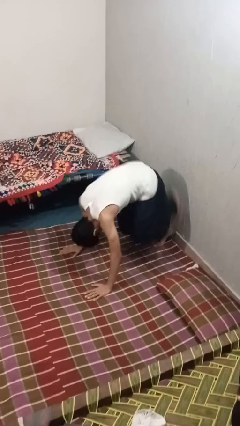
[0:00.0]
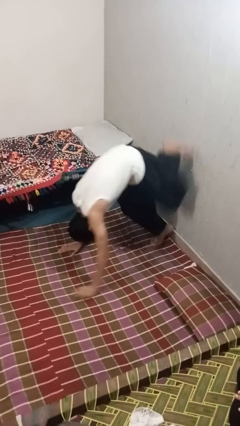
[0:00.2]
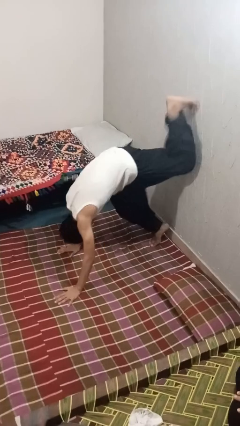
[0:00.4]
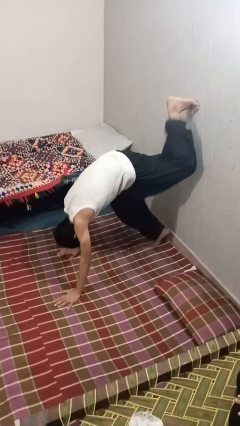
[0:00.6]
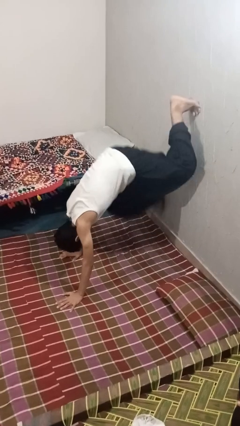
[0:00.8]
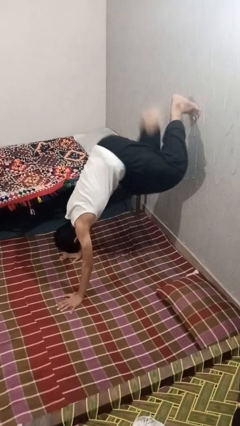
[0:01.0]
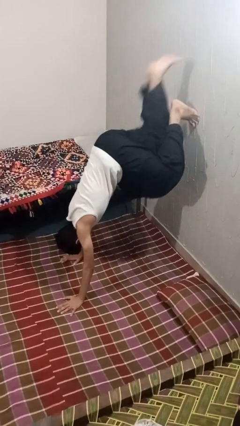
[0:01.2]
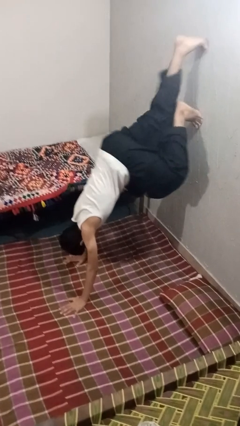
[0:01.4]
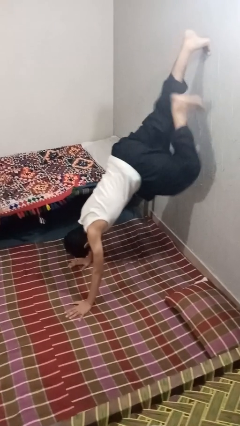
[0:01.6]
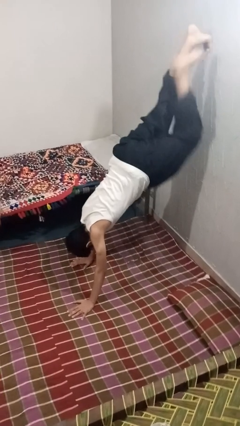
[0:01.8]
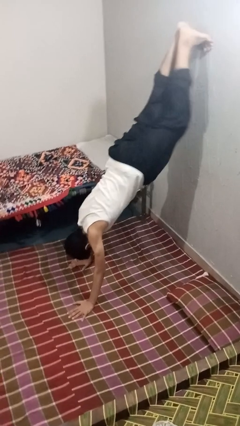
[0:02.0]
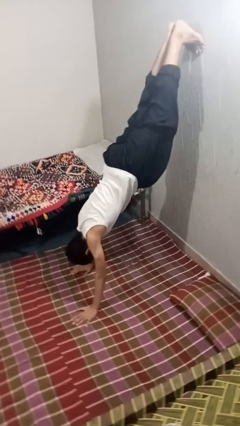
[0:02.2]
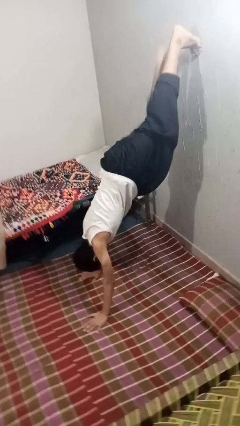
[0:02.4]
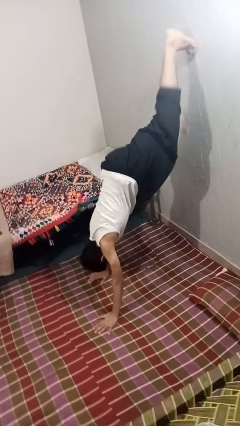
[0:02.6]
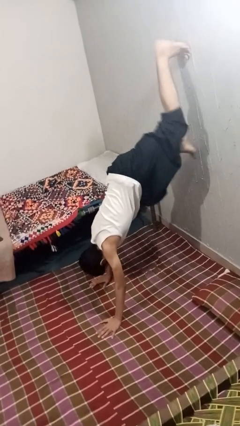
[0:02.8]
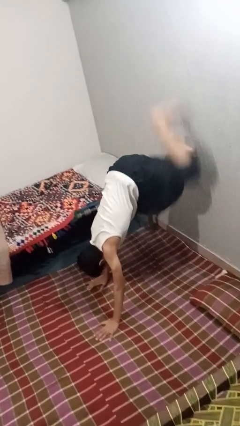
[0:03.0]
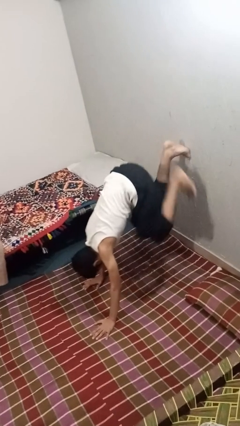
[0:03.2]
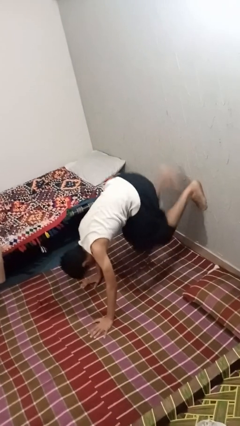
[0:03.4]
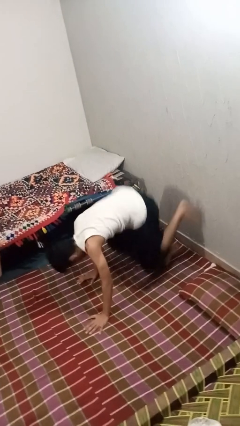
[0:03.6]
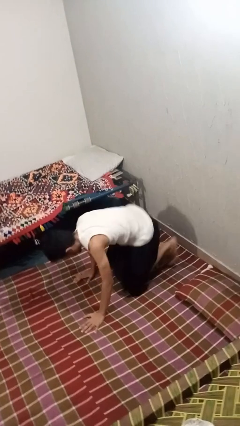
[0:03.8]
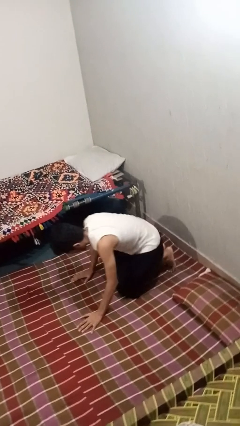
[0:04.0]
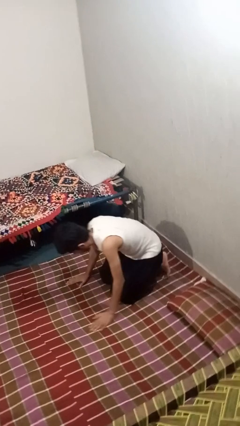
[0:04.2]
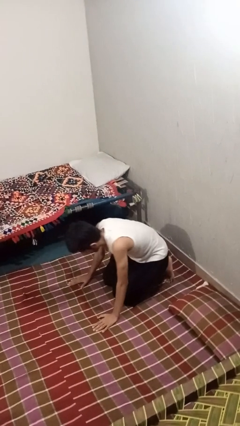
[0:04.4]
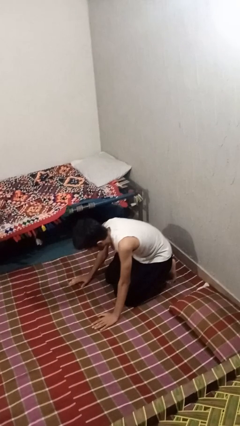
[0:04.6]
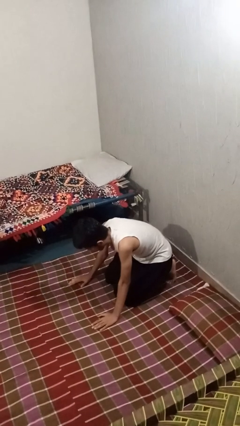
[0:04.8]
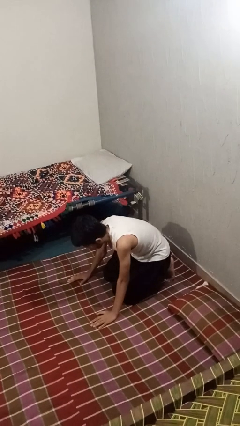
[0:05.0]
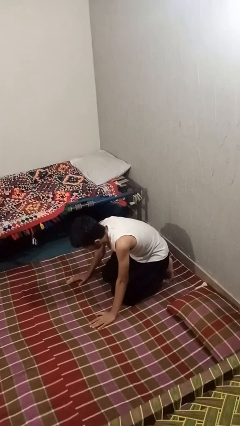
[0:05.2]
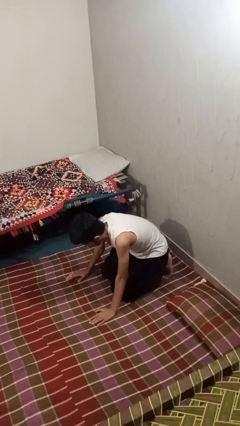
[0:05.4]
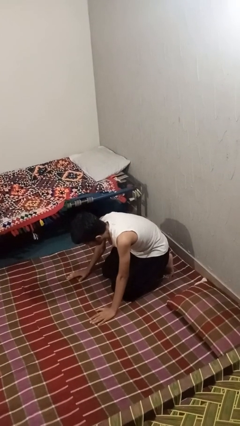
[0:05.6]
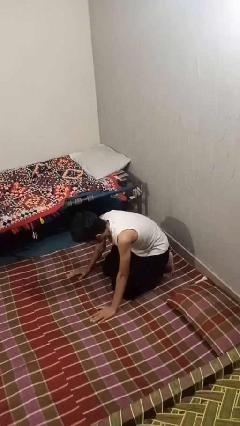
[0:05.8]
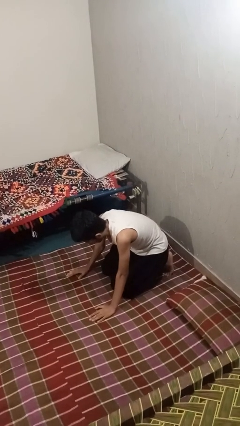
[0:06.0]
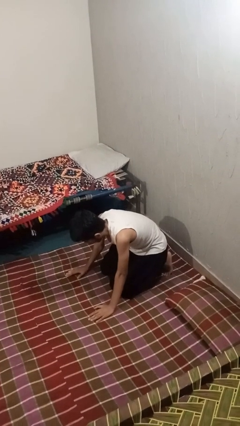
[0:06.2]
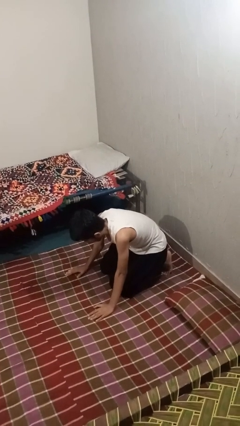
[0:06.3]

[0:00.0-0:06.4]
person handstand

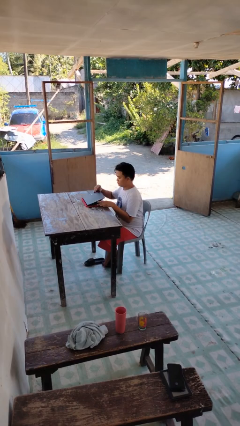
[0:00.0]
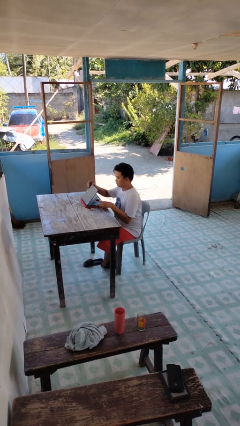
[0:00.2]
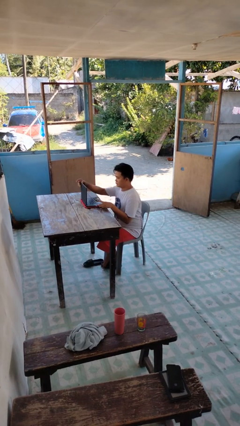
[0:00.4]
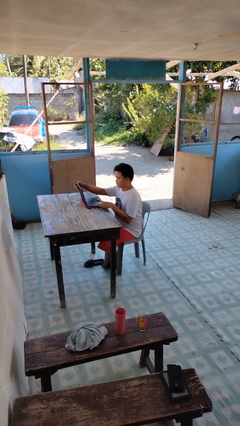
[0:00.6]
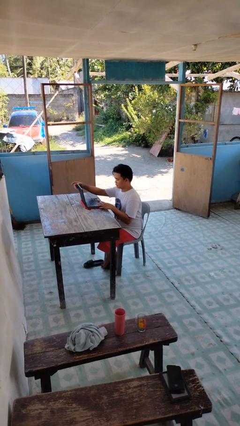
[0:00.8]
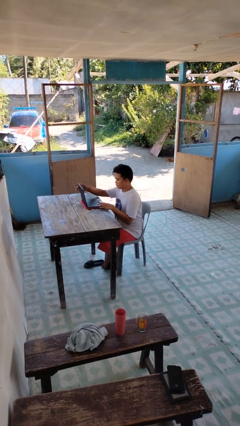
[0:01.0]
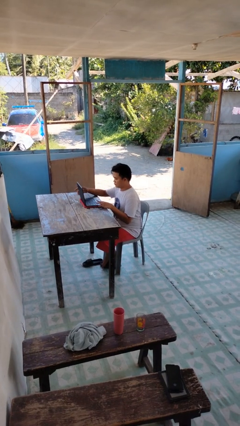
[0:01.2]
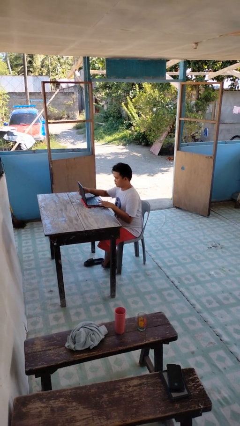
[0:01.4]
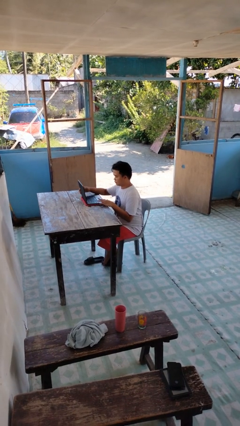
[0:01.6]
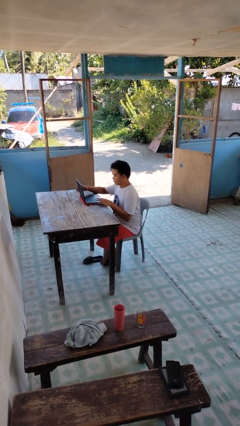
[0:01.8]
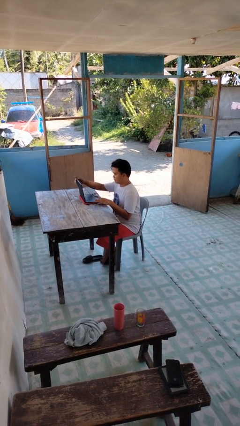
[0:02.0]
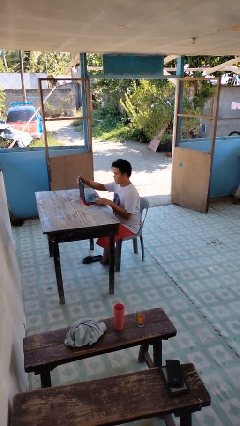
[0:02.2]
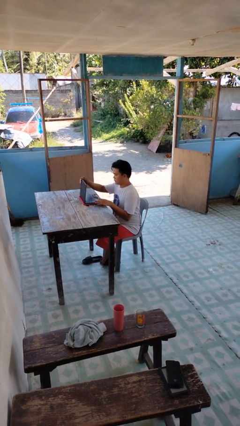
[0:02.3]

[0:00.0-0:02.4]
person opens laptop

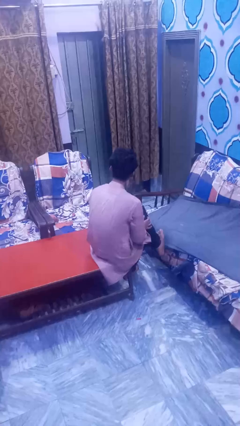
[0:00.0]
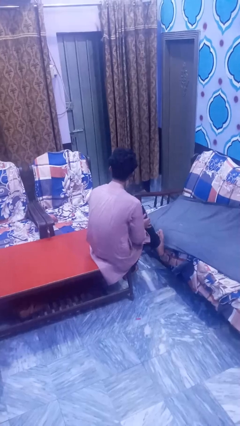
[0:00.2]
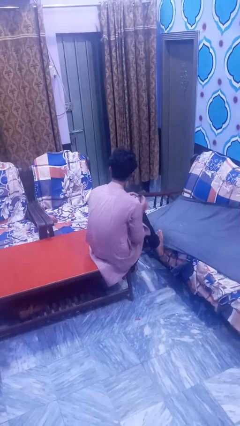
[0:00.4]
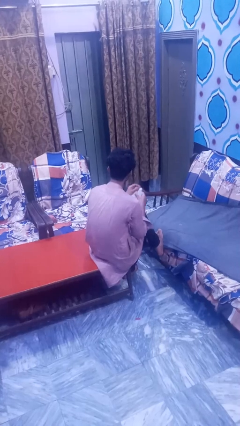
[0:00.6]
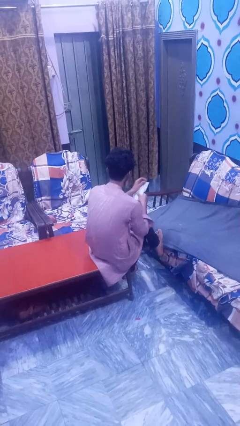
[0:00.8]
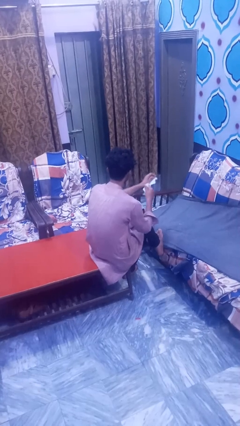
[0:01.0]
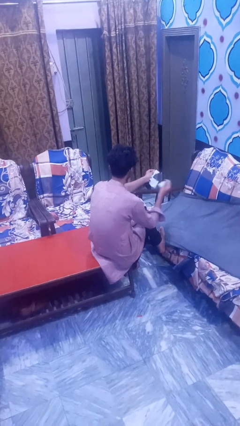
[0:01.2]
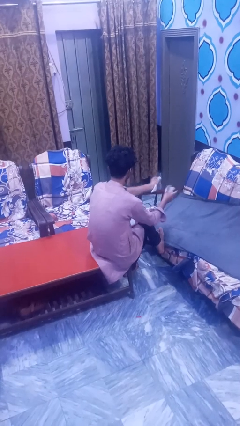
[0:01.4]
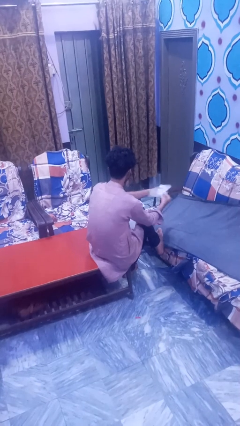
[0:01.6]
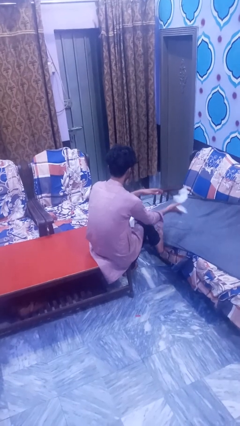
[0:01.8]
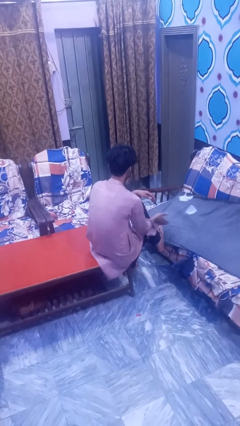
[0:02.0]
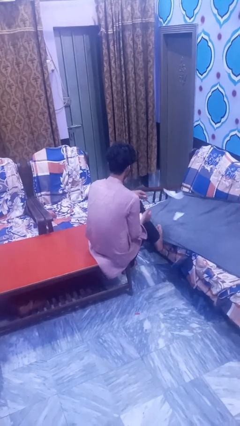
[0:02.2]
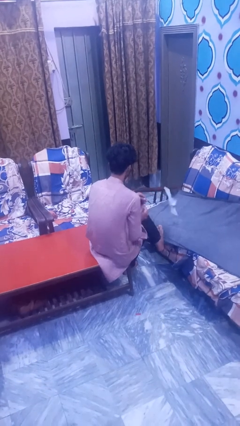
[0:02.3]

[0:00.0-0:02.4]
person tears paper

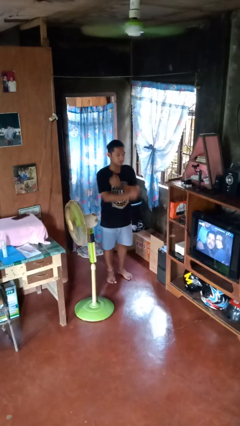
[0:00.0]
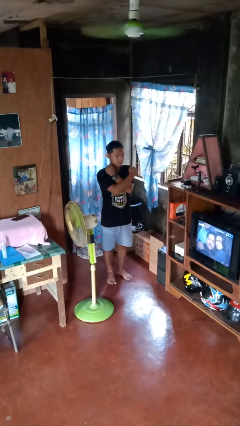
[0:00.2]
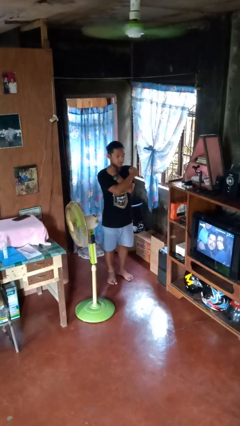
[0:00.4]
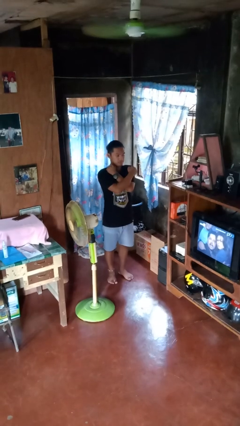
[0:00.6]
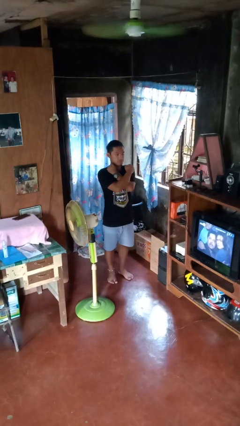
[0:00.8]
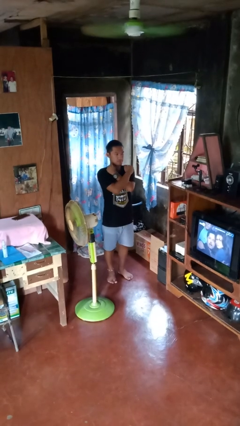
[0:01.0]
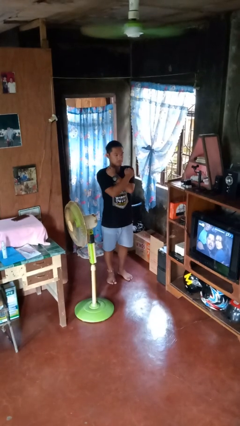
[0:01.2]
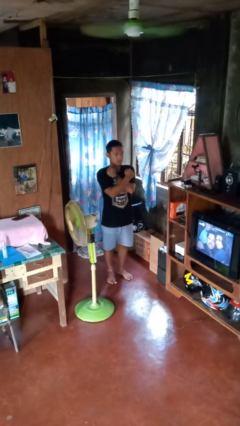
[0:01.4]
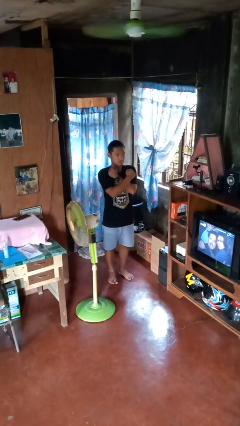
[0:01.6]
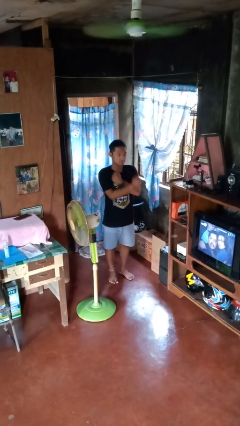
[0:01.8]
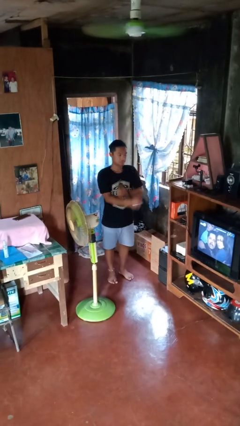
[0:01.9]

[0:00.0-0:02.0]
person gestures arms x

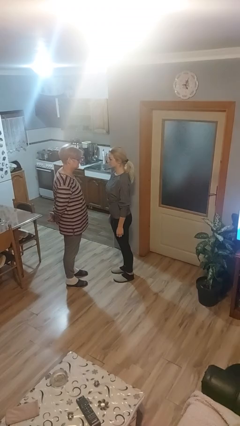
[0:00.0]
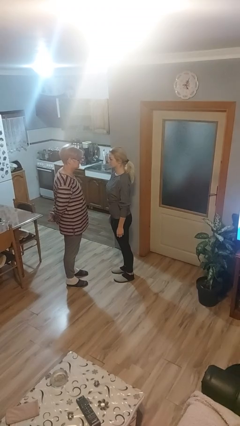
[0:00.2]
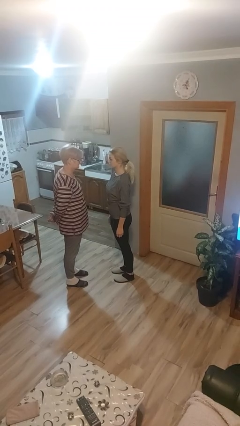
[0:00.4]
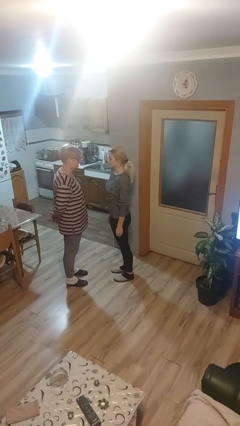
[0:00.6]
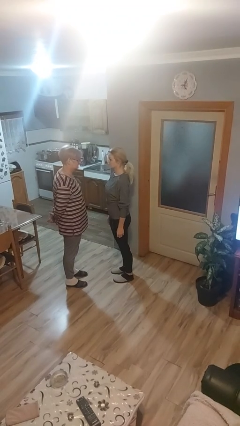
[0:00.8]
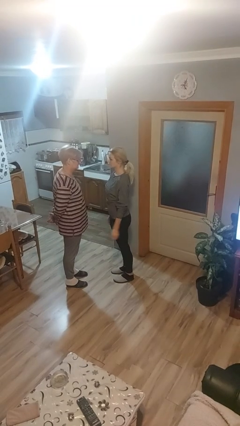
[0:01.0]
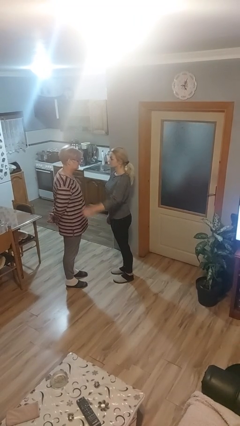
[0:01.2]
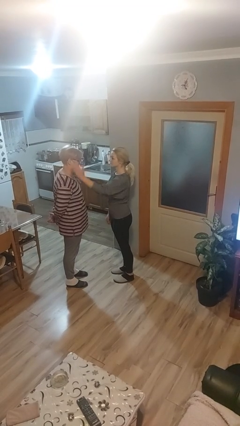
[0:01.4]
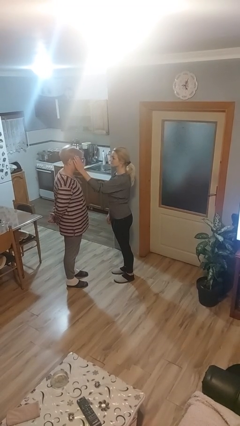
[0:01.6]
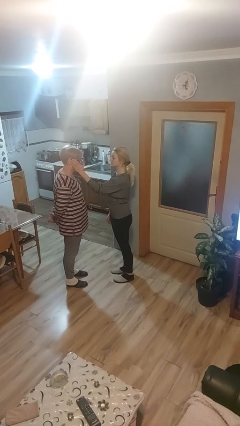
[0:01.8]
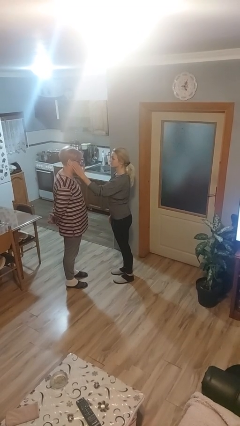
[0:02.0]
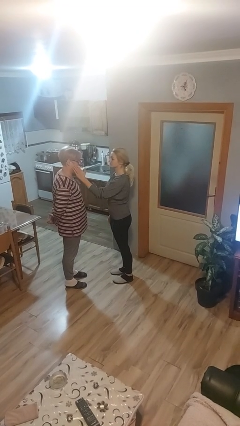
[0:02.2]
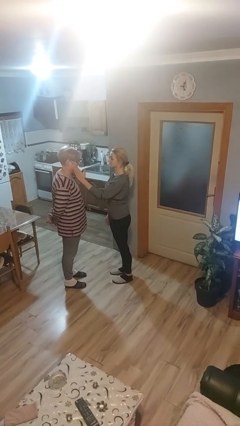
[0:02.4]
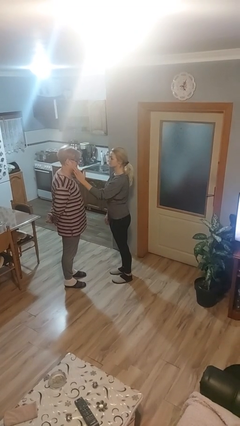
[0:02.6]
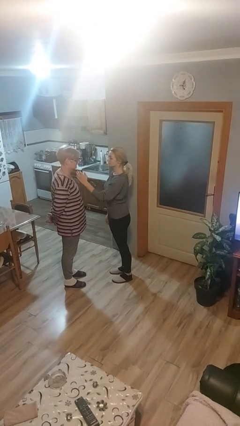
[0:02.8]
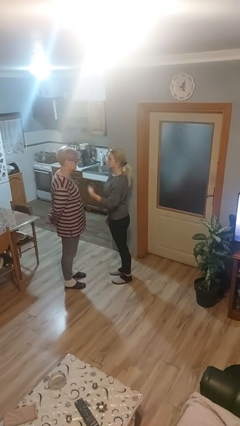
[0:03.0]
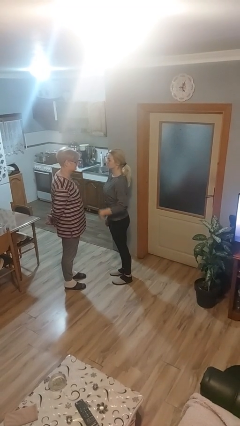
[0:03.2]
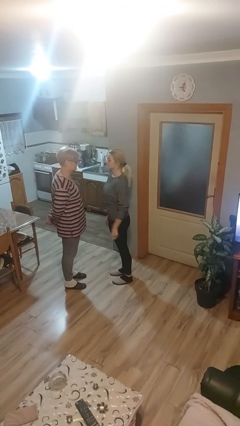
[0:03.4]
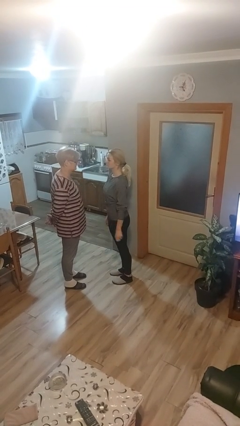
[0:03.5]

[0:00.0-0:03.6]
person touches face of person

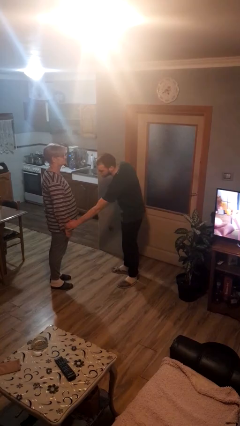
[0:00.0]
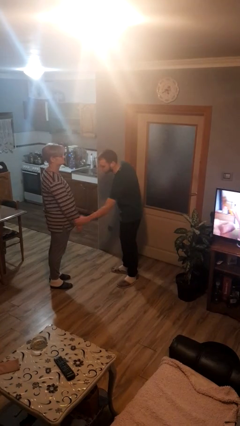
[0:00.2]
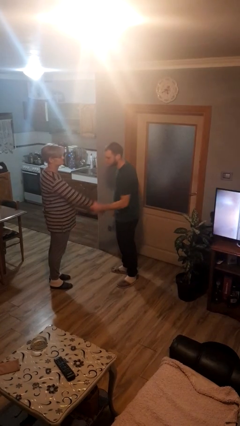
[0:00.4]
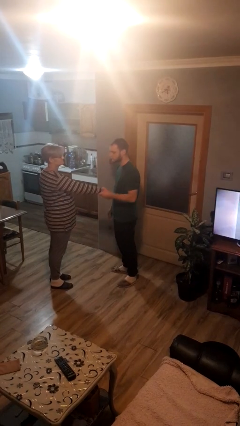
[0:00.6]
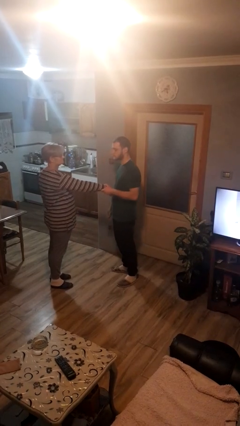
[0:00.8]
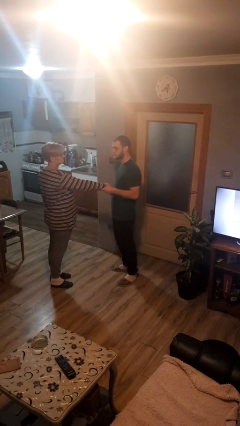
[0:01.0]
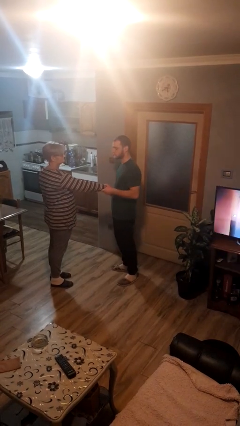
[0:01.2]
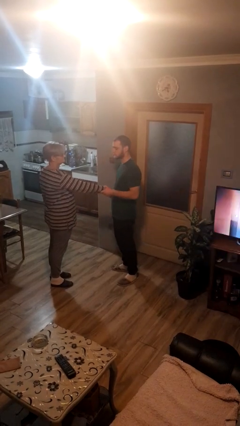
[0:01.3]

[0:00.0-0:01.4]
person grabs person by forearm
